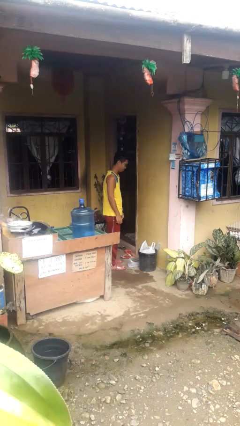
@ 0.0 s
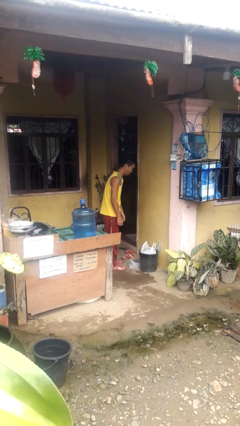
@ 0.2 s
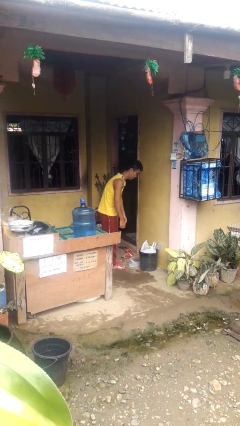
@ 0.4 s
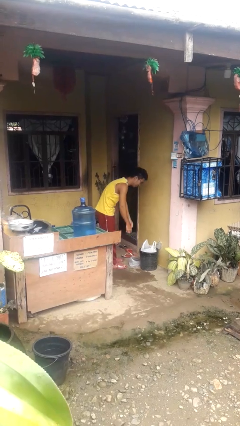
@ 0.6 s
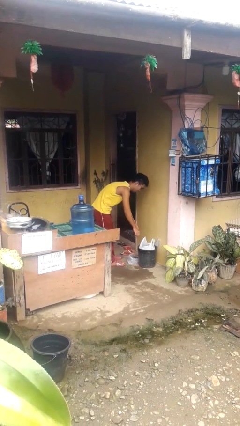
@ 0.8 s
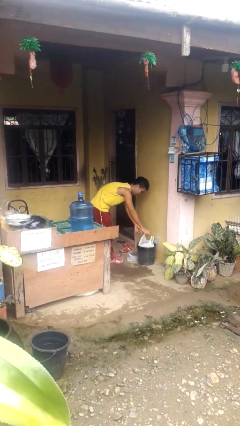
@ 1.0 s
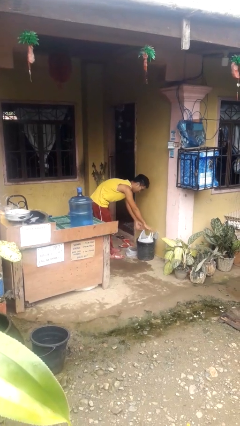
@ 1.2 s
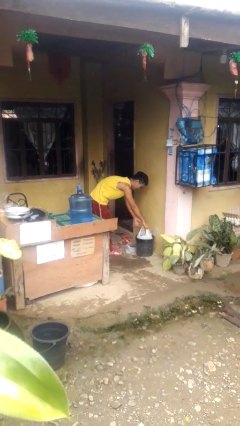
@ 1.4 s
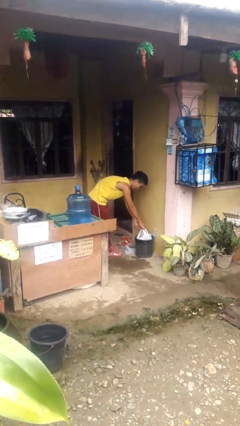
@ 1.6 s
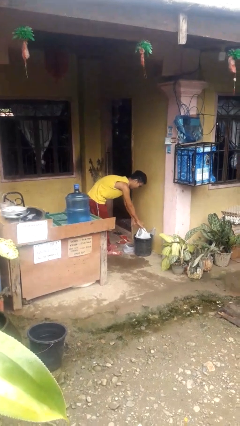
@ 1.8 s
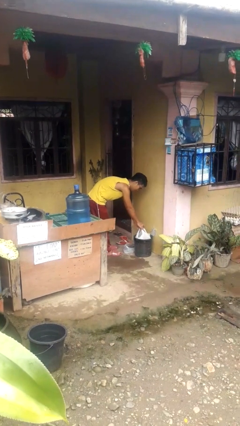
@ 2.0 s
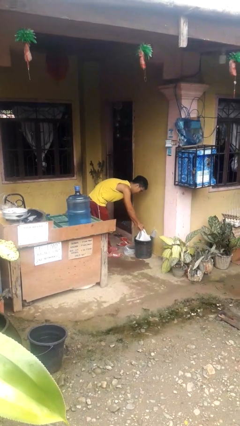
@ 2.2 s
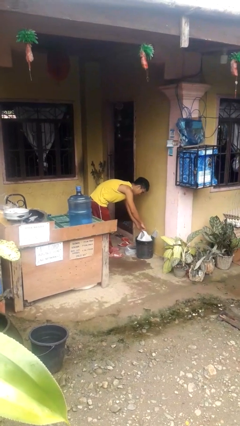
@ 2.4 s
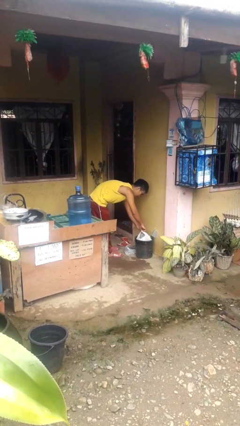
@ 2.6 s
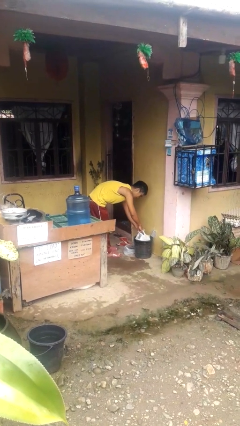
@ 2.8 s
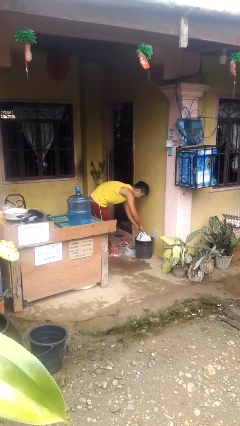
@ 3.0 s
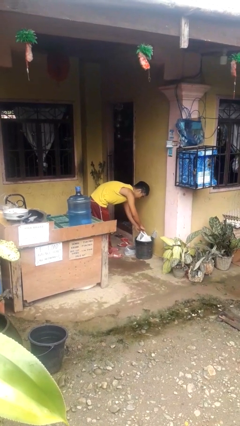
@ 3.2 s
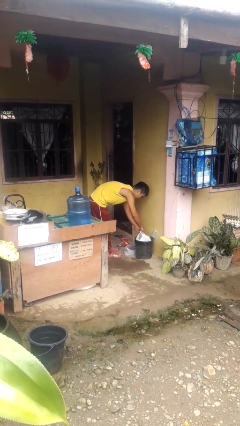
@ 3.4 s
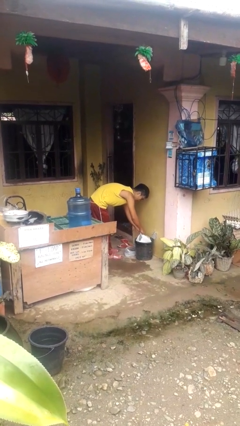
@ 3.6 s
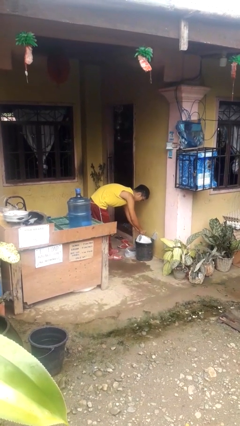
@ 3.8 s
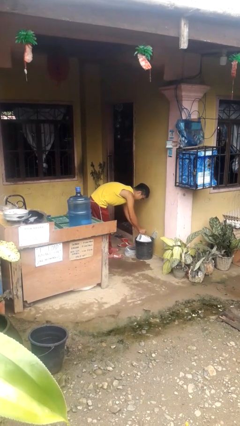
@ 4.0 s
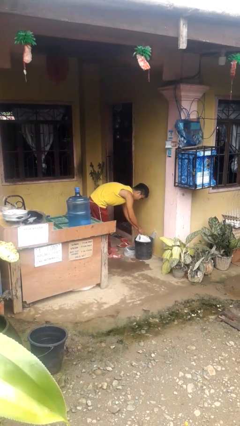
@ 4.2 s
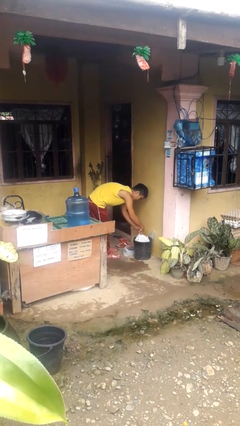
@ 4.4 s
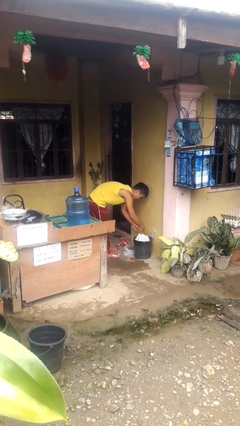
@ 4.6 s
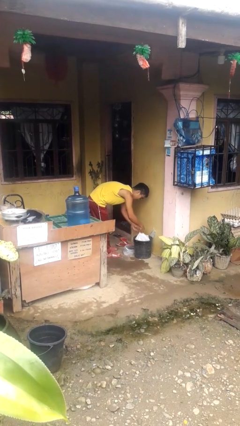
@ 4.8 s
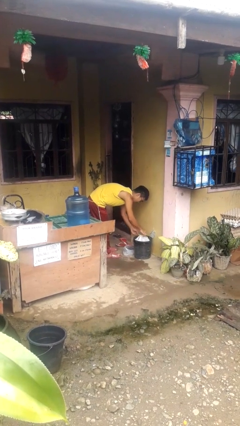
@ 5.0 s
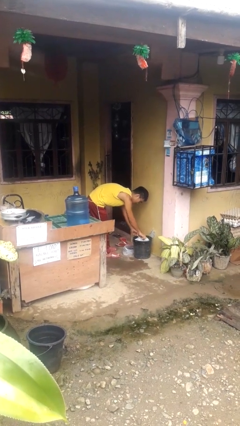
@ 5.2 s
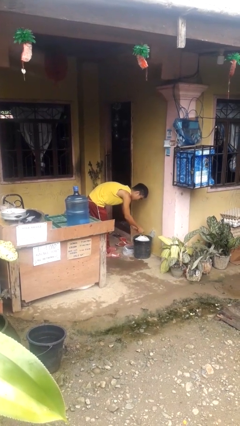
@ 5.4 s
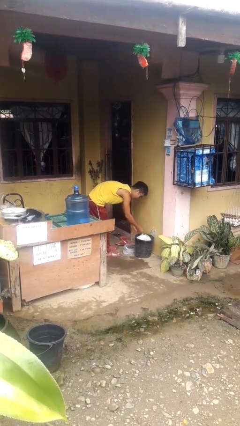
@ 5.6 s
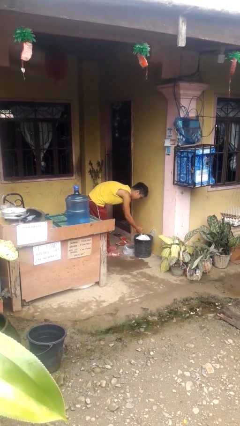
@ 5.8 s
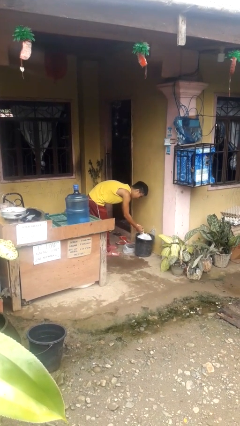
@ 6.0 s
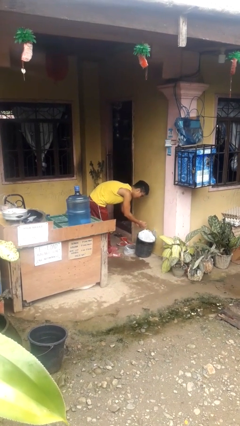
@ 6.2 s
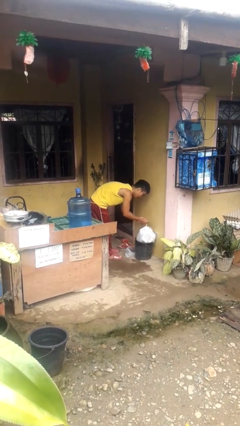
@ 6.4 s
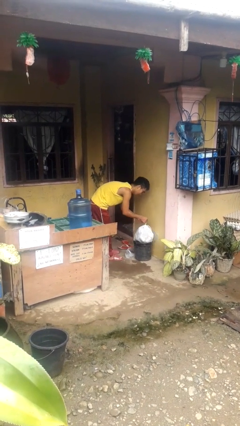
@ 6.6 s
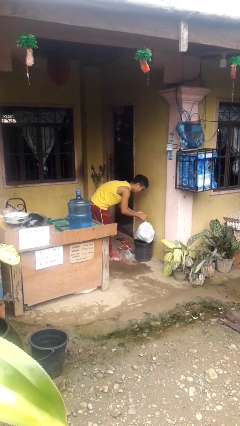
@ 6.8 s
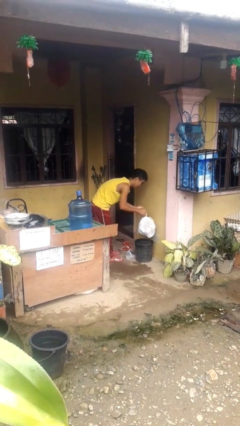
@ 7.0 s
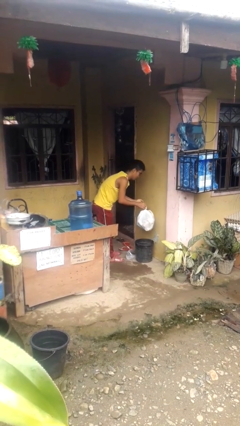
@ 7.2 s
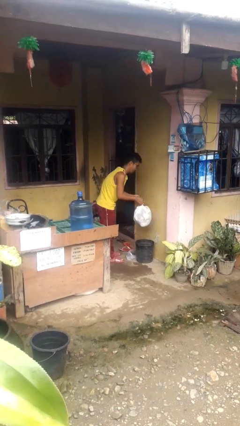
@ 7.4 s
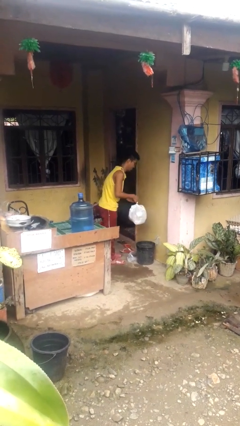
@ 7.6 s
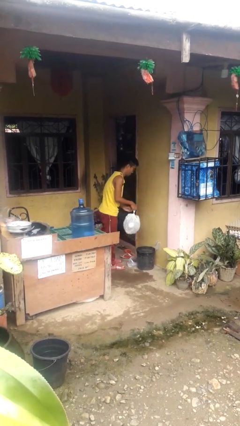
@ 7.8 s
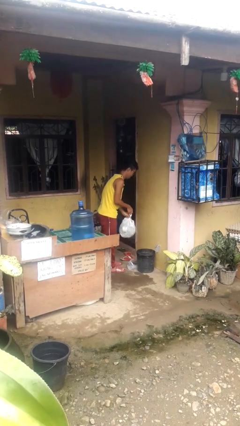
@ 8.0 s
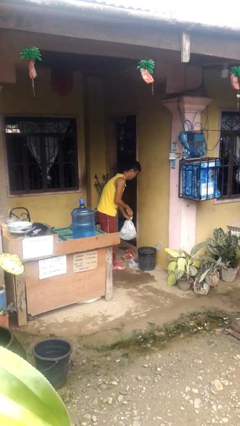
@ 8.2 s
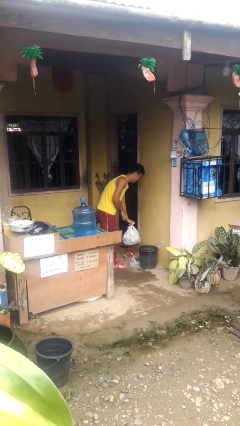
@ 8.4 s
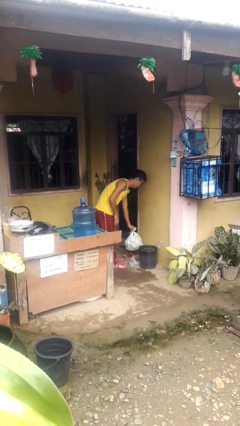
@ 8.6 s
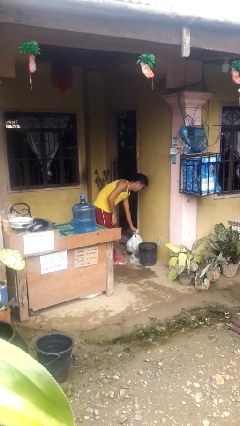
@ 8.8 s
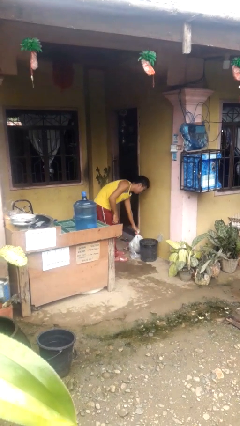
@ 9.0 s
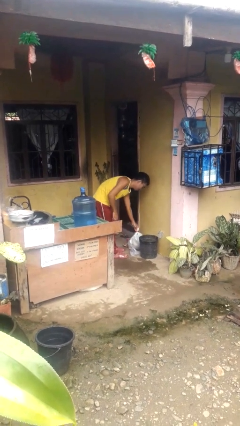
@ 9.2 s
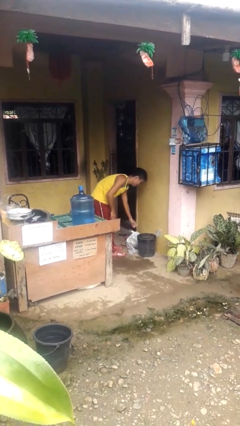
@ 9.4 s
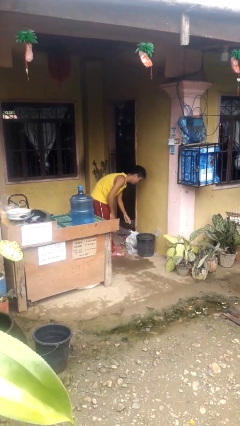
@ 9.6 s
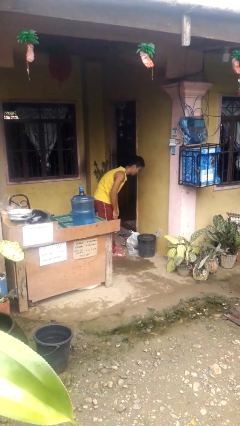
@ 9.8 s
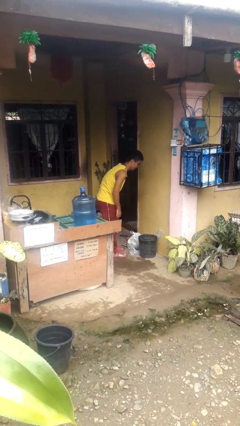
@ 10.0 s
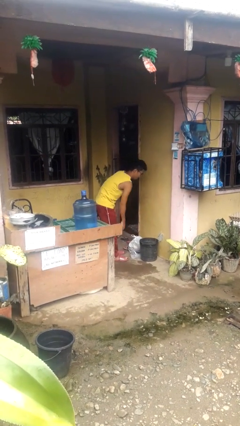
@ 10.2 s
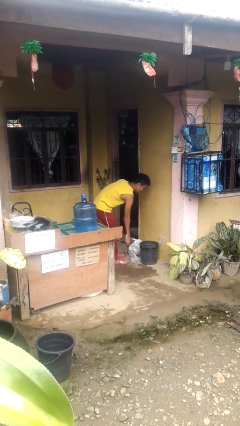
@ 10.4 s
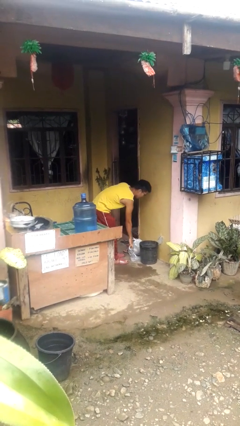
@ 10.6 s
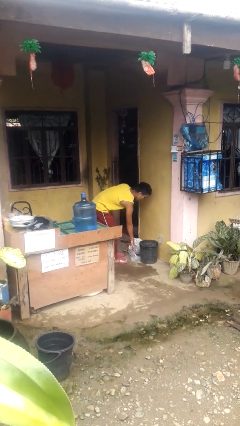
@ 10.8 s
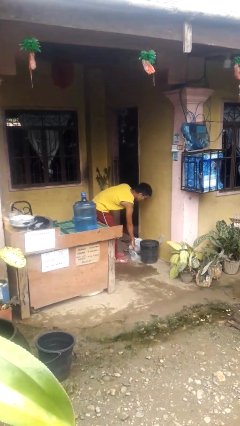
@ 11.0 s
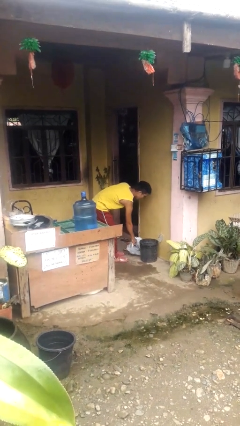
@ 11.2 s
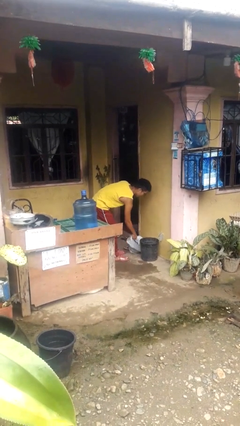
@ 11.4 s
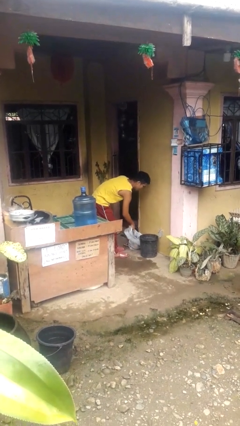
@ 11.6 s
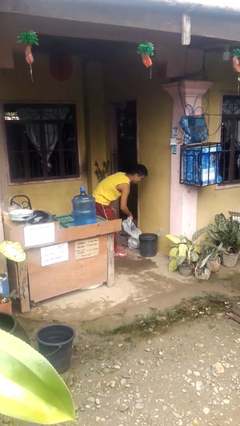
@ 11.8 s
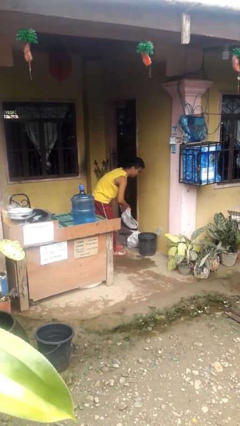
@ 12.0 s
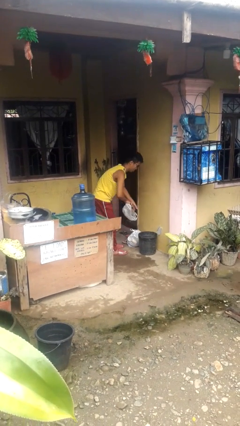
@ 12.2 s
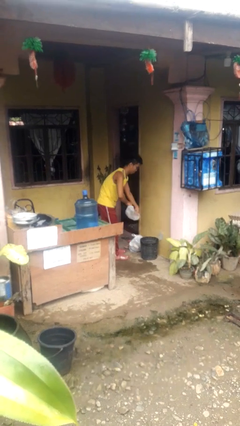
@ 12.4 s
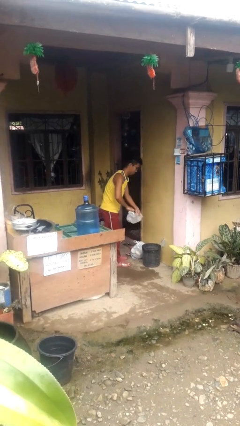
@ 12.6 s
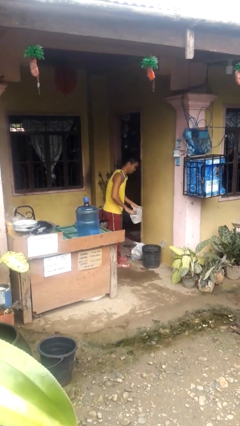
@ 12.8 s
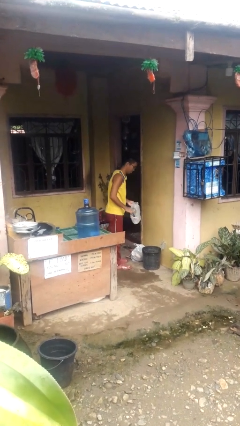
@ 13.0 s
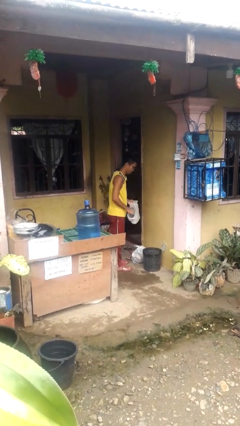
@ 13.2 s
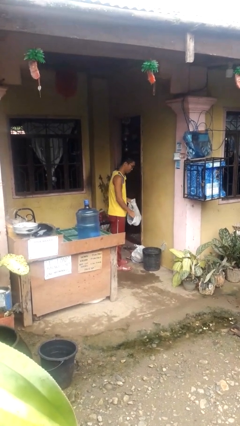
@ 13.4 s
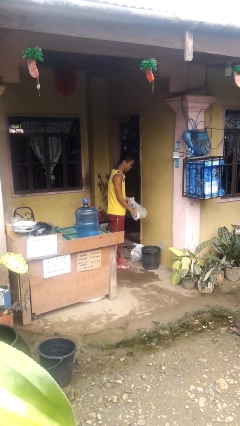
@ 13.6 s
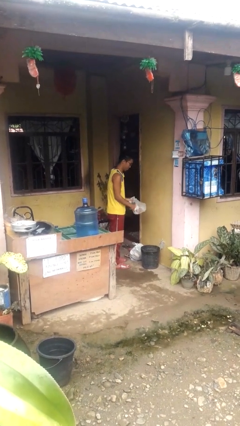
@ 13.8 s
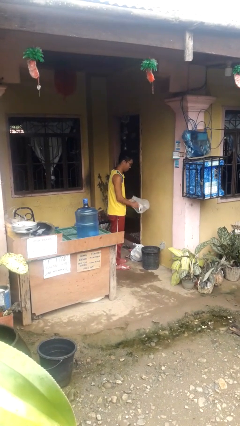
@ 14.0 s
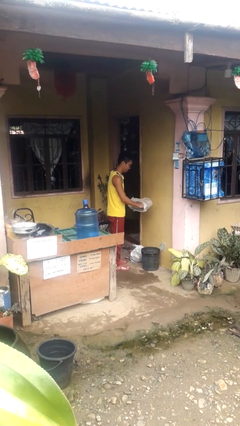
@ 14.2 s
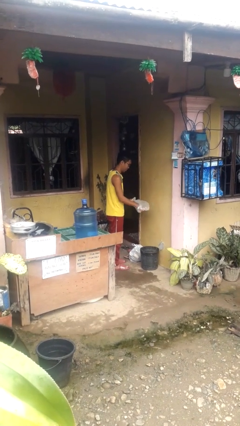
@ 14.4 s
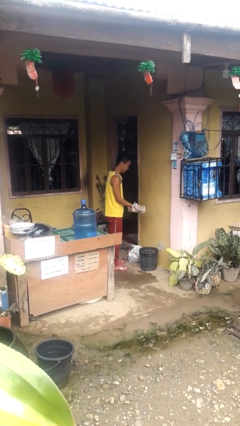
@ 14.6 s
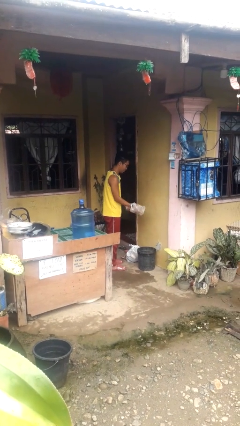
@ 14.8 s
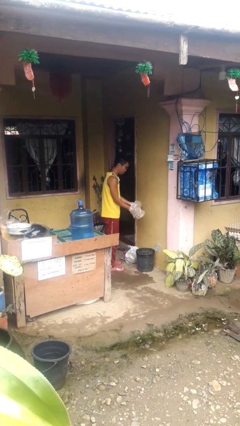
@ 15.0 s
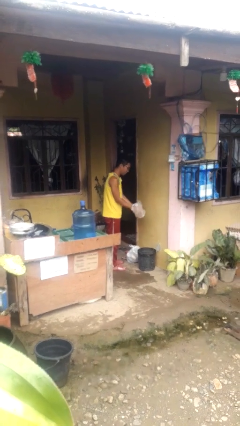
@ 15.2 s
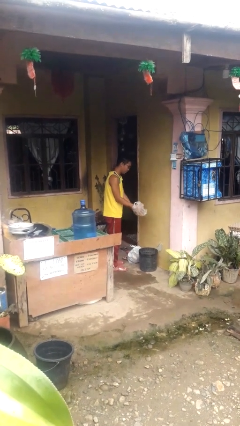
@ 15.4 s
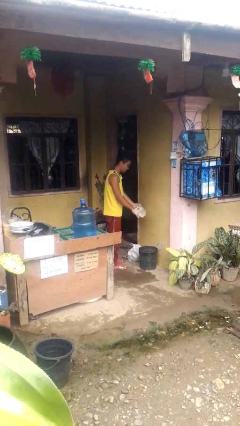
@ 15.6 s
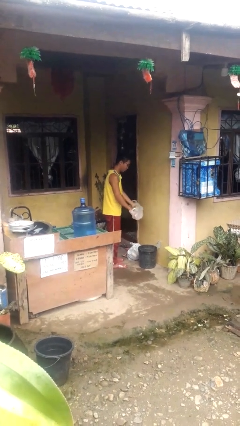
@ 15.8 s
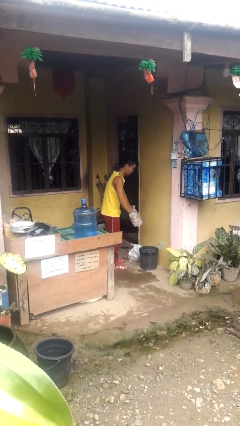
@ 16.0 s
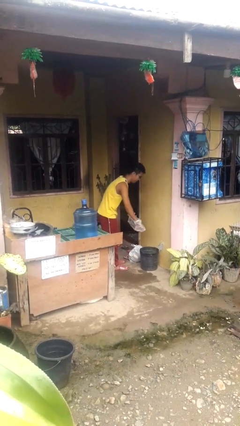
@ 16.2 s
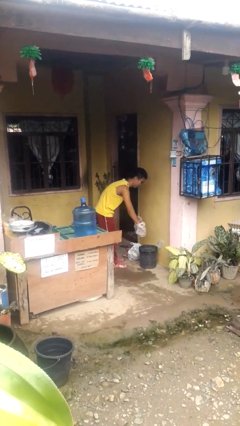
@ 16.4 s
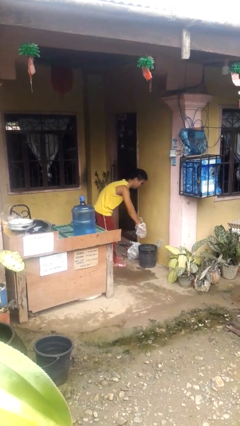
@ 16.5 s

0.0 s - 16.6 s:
person removes trashbag from trashcan

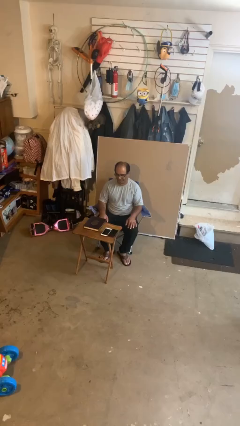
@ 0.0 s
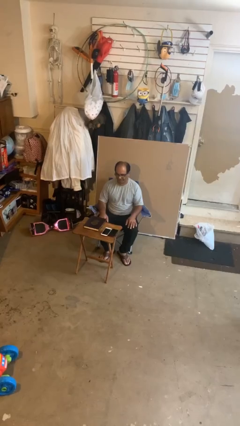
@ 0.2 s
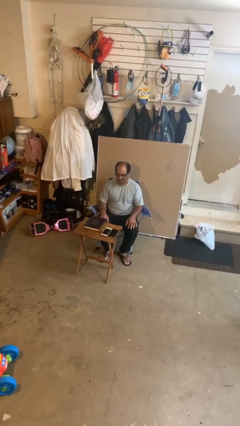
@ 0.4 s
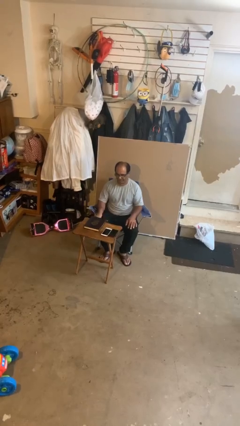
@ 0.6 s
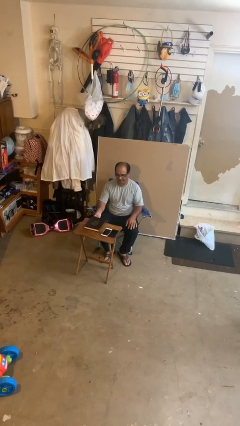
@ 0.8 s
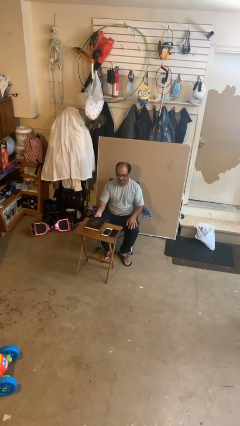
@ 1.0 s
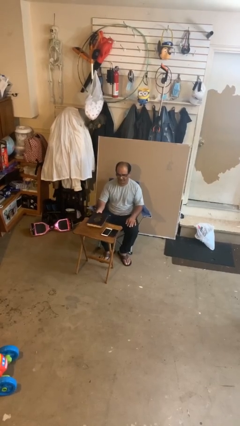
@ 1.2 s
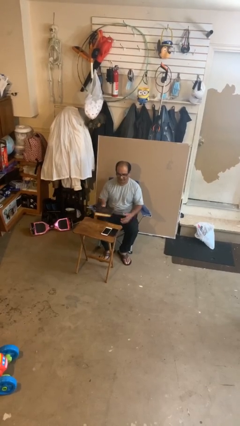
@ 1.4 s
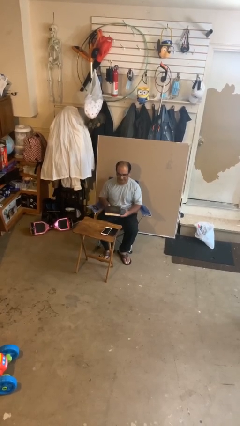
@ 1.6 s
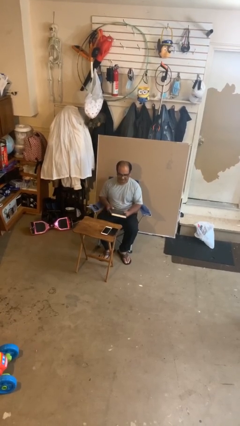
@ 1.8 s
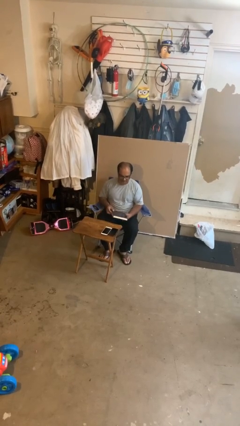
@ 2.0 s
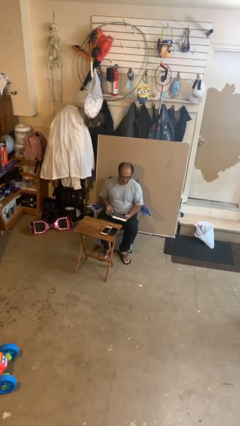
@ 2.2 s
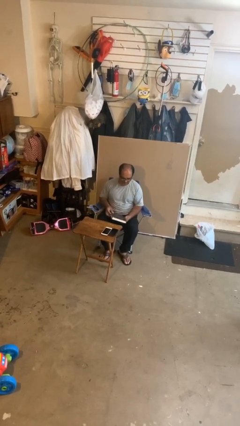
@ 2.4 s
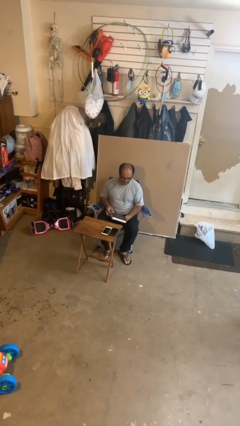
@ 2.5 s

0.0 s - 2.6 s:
person picks up object from table
